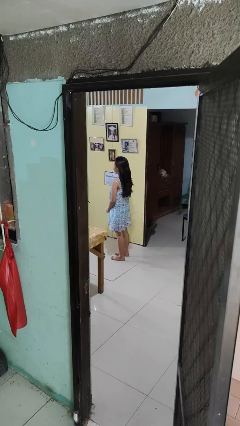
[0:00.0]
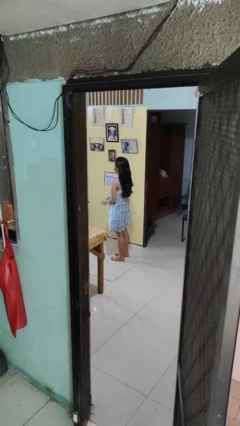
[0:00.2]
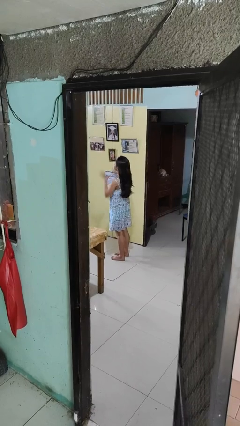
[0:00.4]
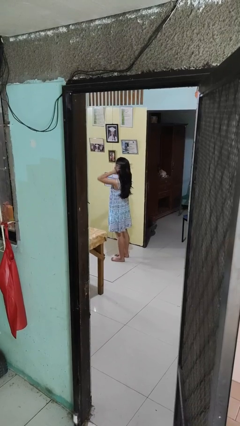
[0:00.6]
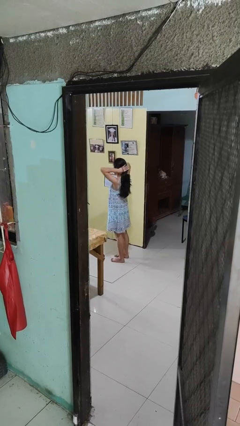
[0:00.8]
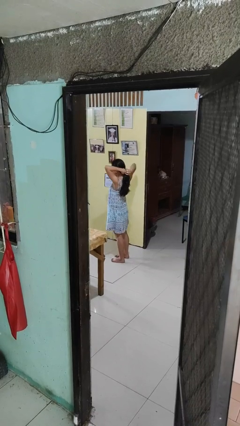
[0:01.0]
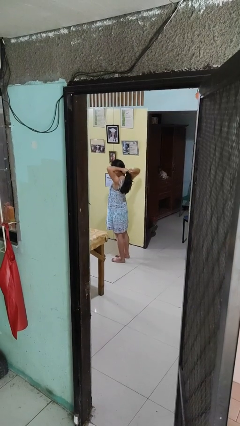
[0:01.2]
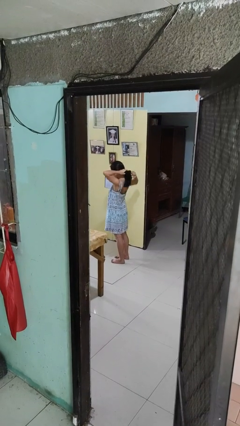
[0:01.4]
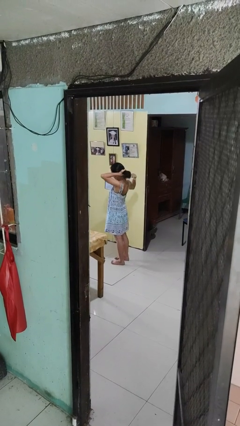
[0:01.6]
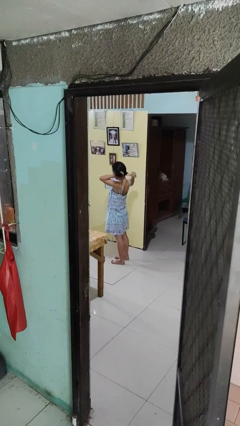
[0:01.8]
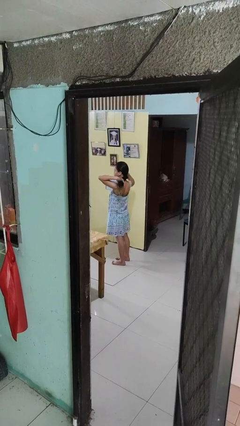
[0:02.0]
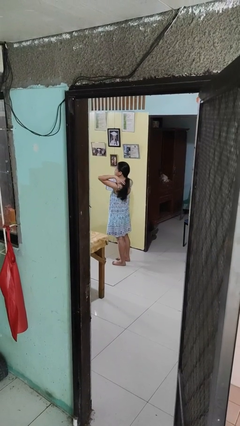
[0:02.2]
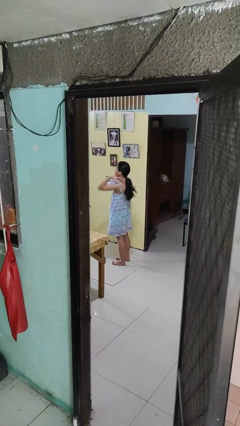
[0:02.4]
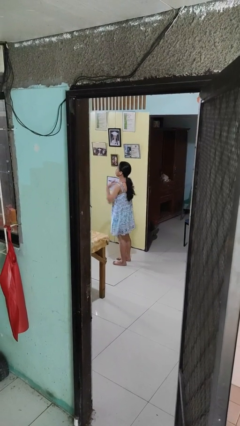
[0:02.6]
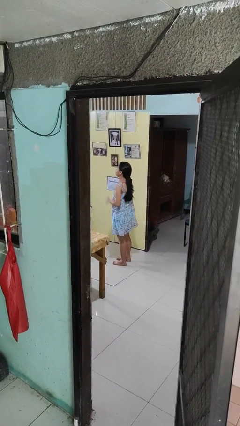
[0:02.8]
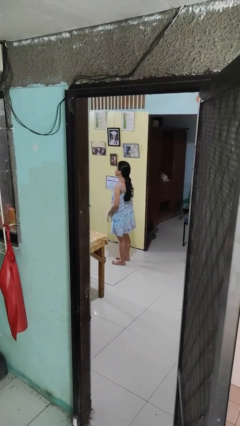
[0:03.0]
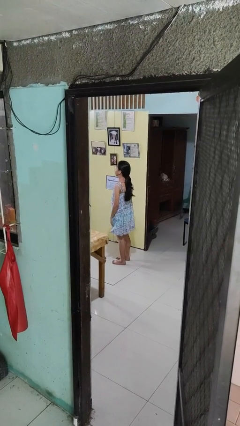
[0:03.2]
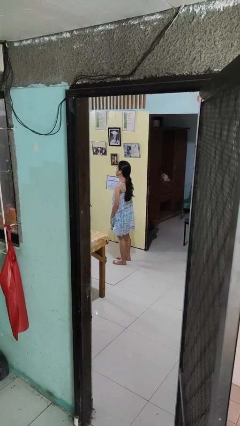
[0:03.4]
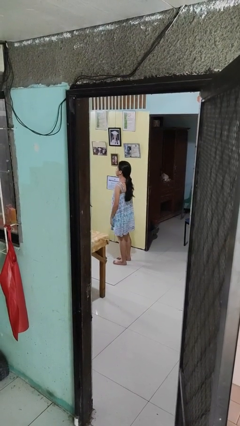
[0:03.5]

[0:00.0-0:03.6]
person puts hair in ponytail

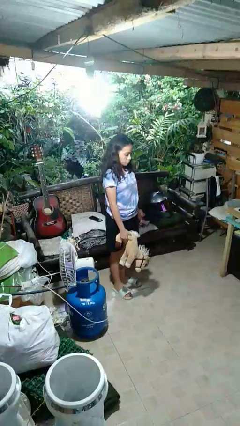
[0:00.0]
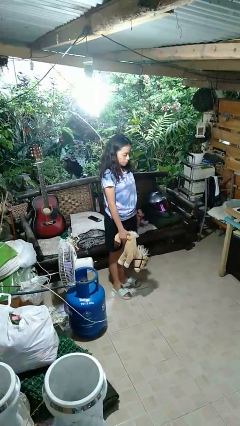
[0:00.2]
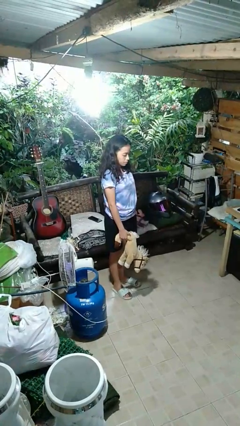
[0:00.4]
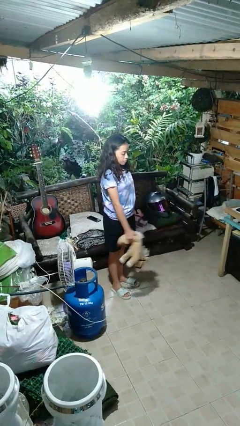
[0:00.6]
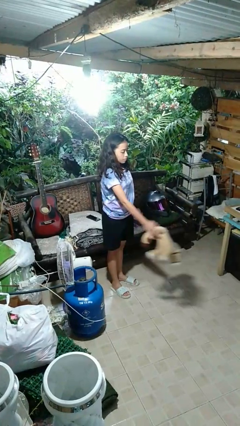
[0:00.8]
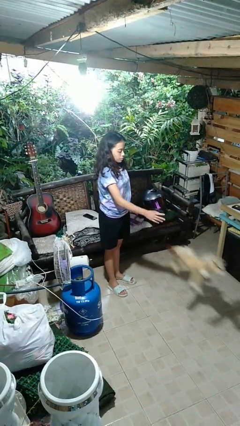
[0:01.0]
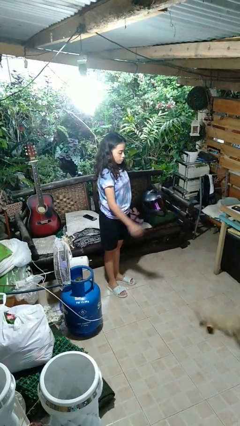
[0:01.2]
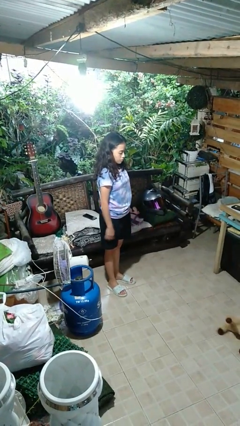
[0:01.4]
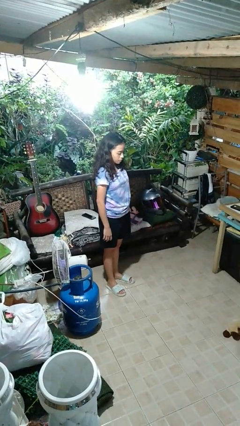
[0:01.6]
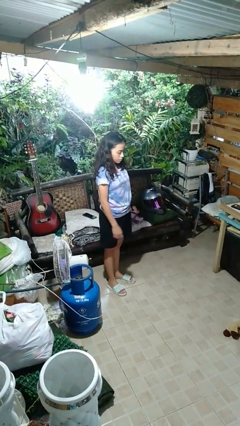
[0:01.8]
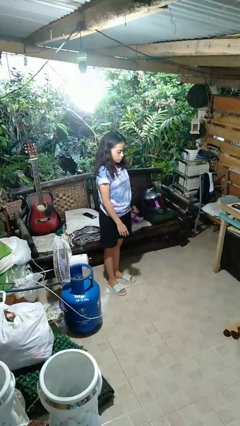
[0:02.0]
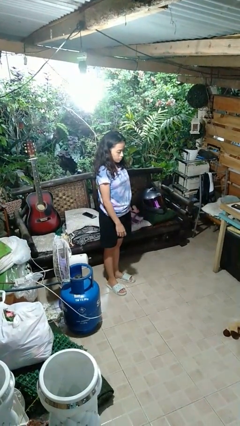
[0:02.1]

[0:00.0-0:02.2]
person throws object to ground

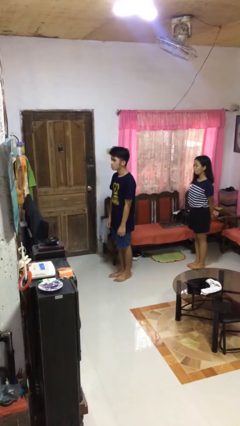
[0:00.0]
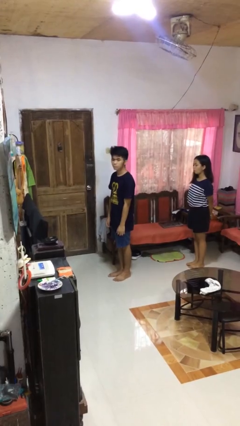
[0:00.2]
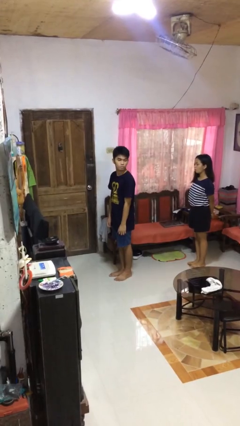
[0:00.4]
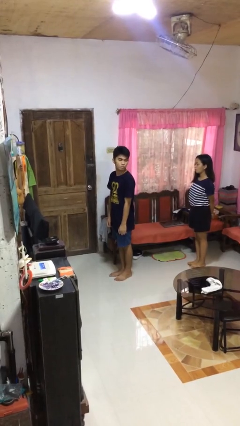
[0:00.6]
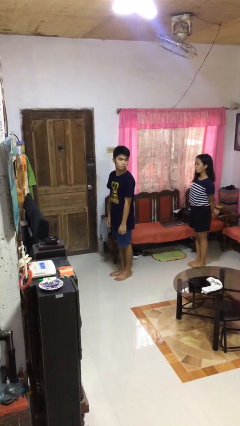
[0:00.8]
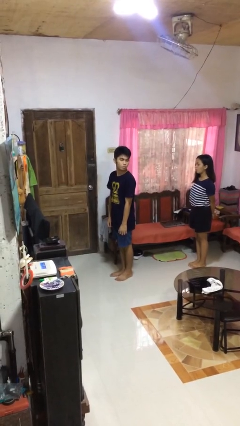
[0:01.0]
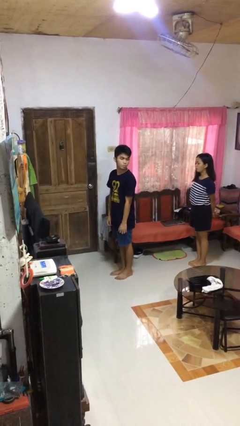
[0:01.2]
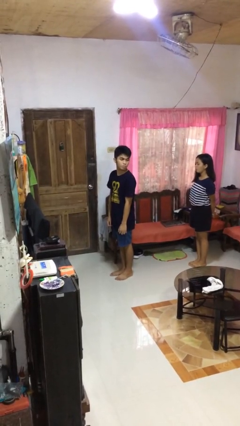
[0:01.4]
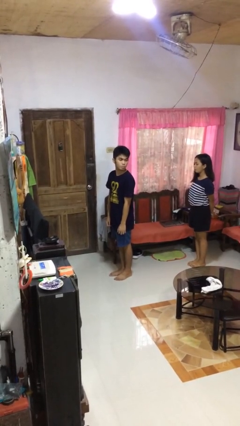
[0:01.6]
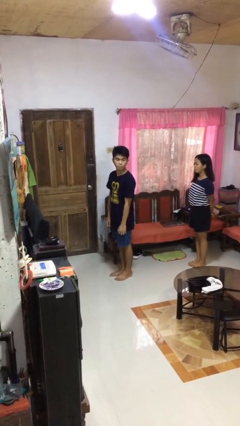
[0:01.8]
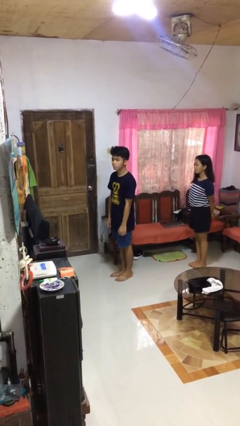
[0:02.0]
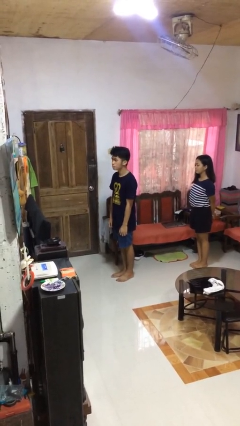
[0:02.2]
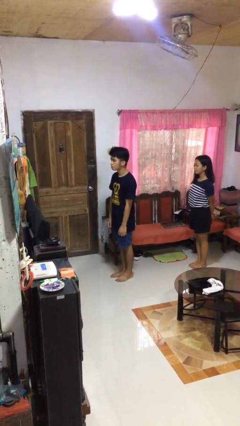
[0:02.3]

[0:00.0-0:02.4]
person looks over shoulder

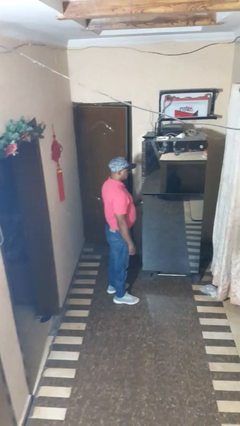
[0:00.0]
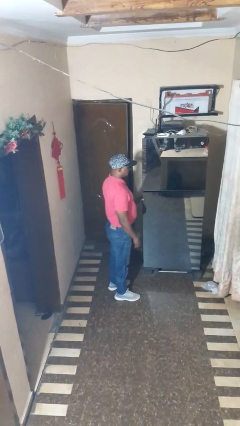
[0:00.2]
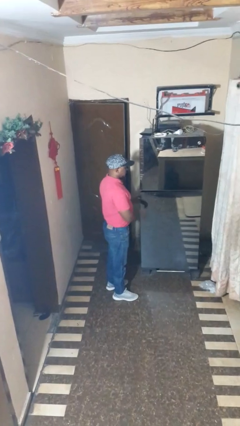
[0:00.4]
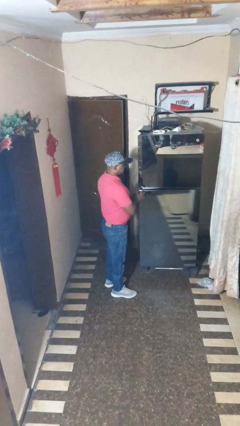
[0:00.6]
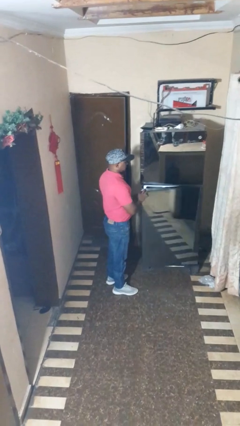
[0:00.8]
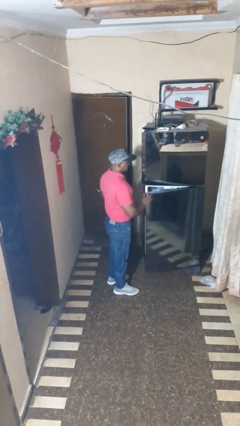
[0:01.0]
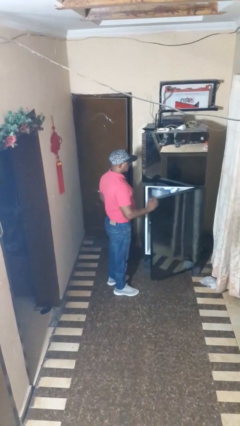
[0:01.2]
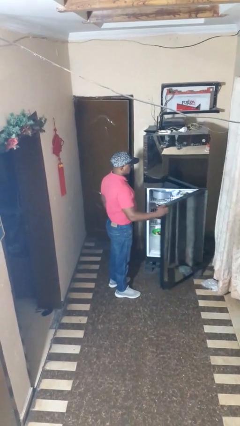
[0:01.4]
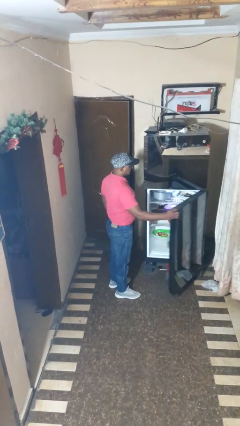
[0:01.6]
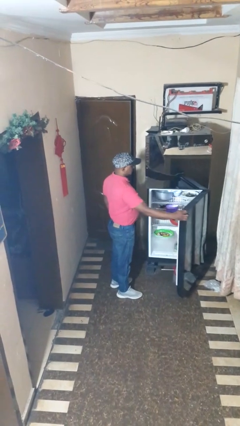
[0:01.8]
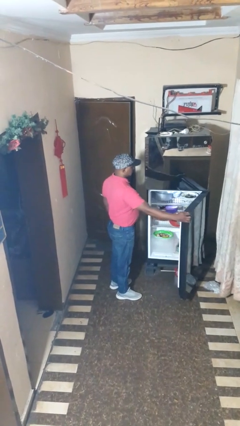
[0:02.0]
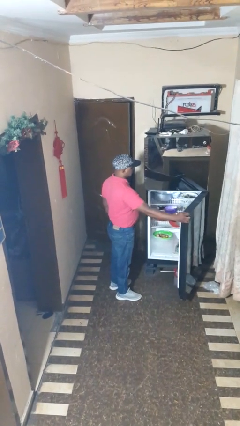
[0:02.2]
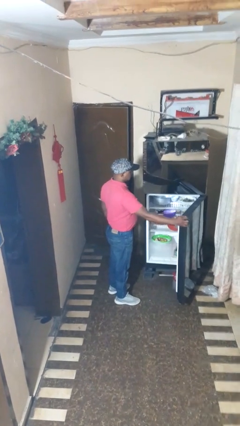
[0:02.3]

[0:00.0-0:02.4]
person opens refrigerator

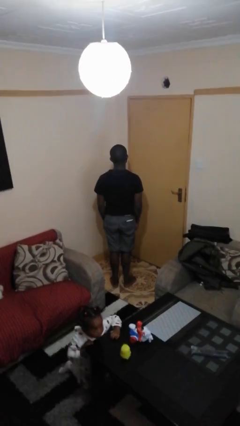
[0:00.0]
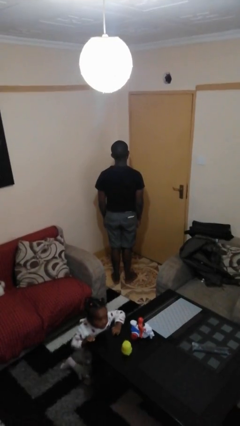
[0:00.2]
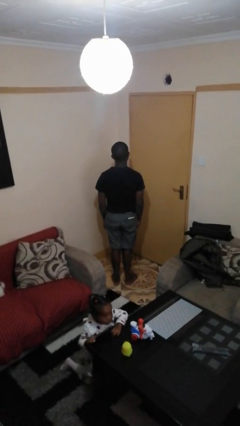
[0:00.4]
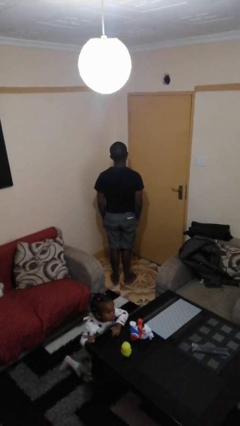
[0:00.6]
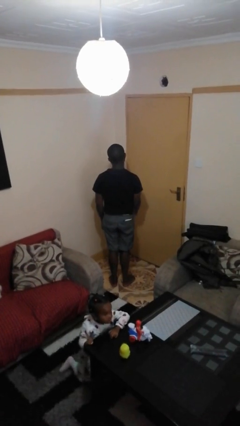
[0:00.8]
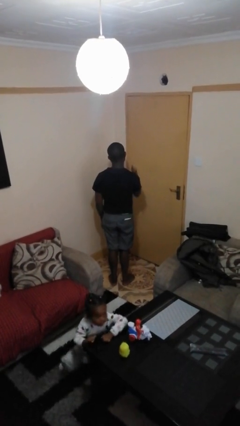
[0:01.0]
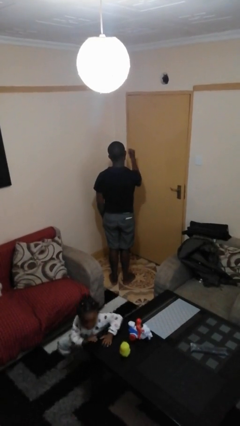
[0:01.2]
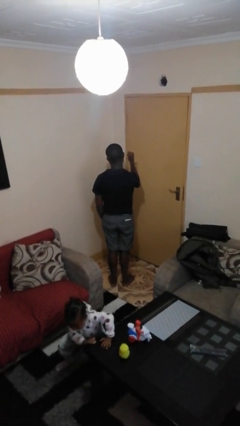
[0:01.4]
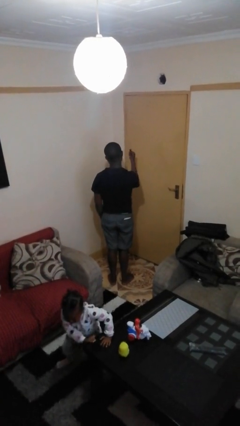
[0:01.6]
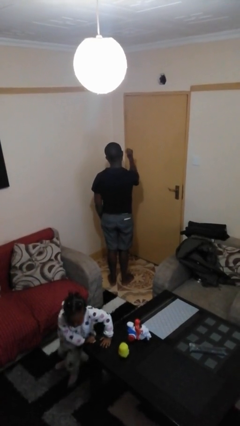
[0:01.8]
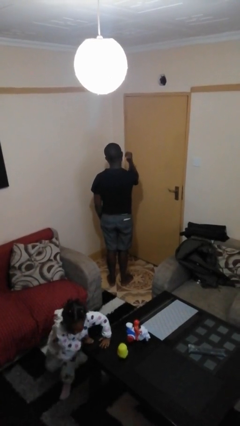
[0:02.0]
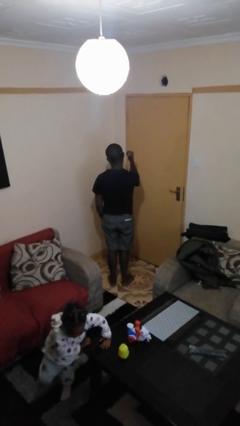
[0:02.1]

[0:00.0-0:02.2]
person gestures behind me

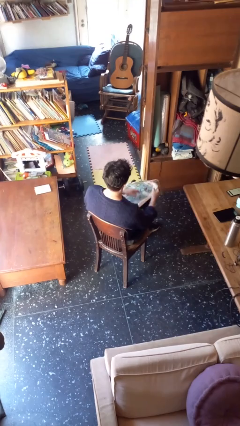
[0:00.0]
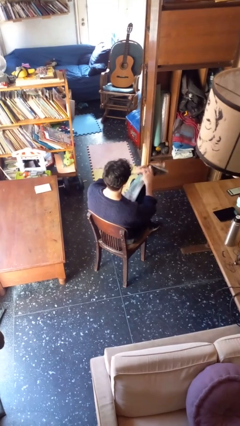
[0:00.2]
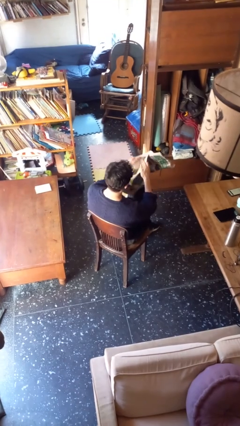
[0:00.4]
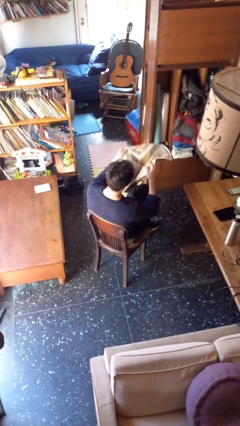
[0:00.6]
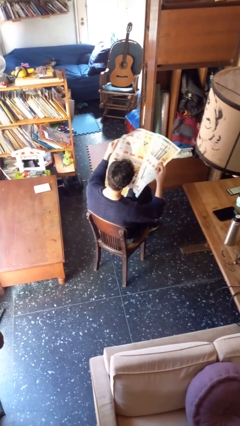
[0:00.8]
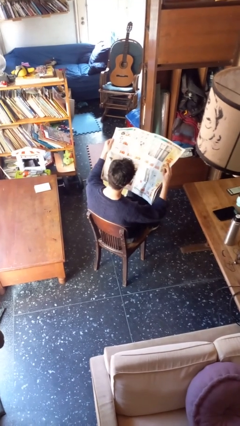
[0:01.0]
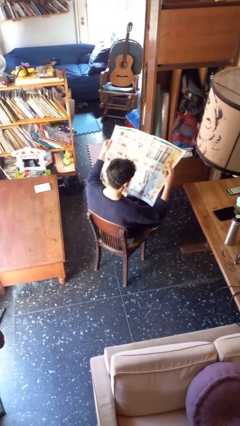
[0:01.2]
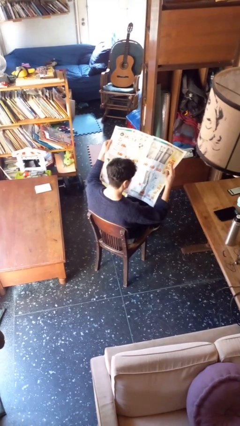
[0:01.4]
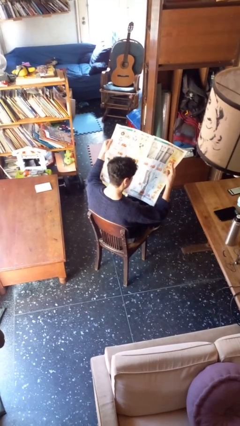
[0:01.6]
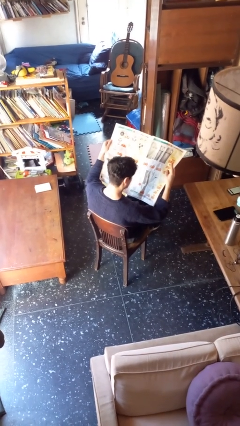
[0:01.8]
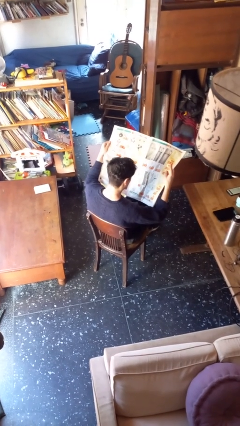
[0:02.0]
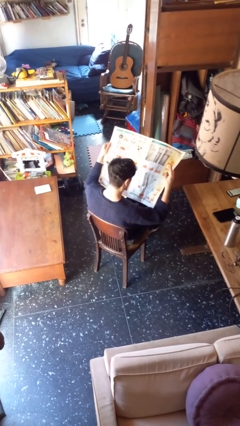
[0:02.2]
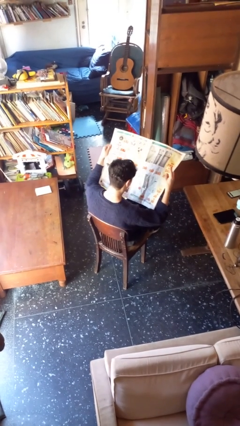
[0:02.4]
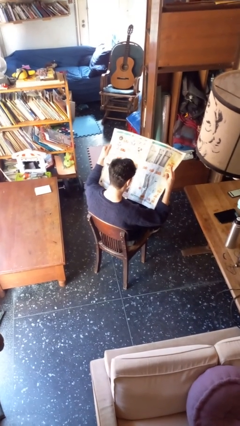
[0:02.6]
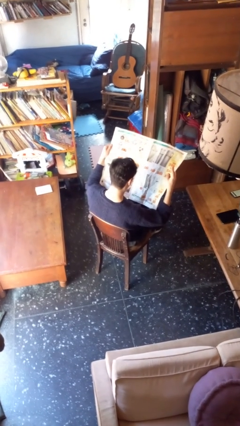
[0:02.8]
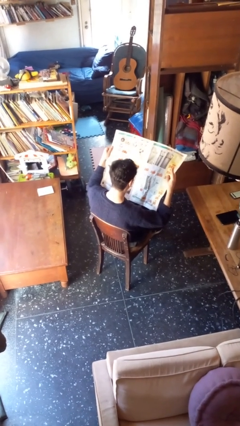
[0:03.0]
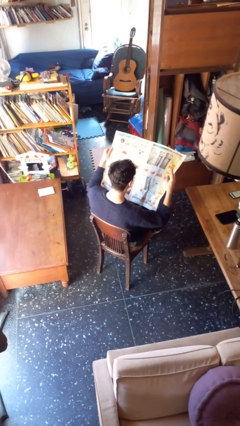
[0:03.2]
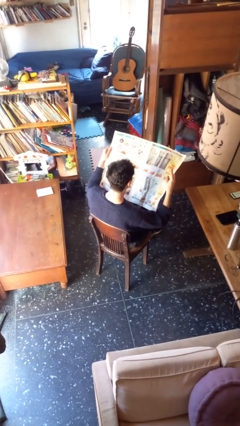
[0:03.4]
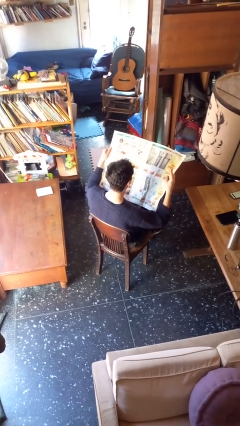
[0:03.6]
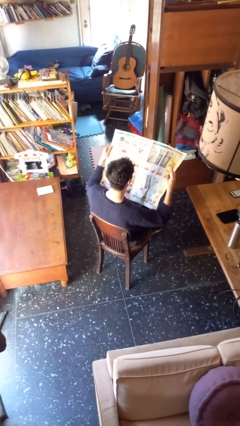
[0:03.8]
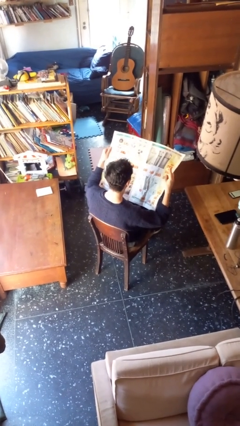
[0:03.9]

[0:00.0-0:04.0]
person reads newspaper

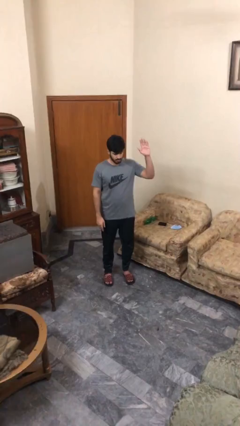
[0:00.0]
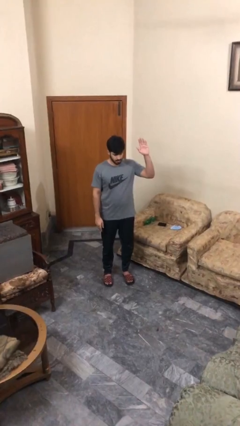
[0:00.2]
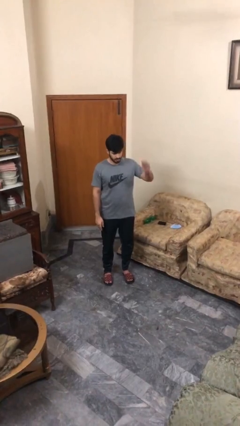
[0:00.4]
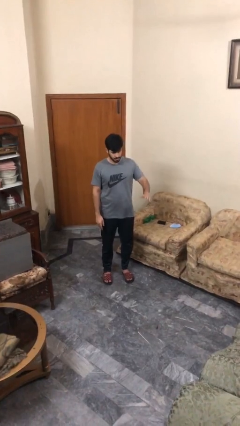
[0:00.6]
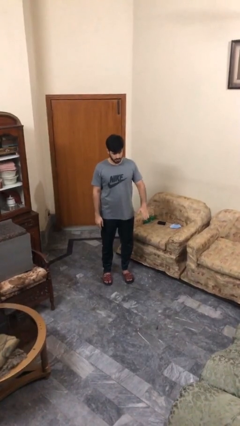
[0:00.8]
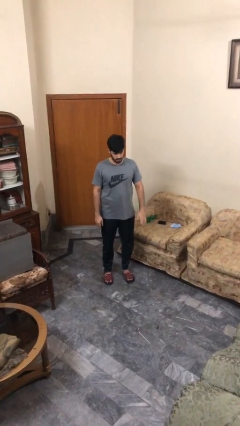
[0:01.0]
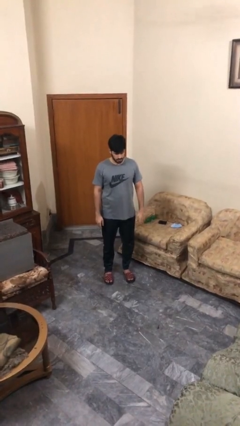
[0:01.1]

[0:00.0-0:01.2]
person gestures lower hand
